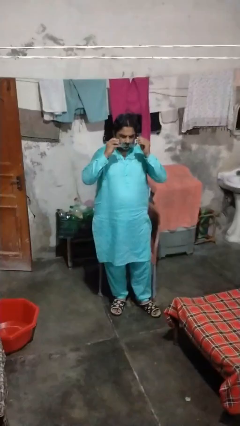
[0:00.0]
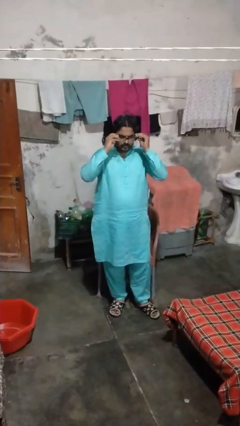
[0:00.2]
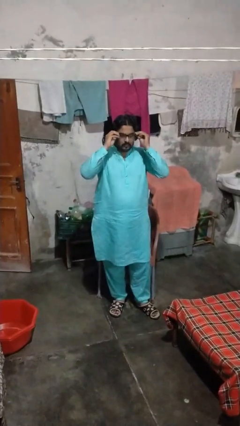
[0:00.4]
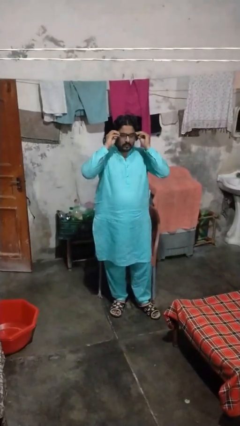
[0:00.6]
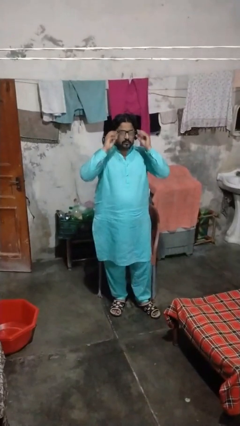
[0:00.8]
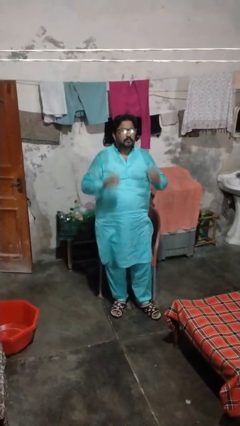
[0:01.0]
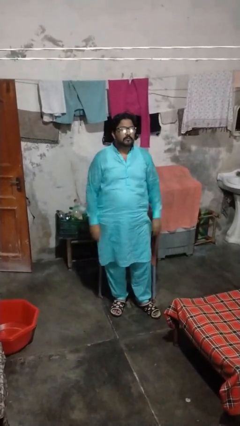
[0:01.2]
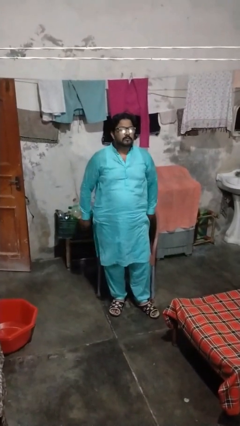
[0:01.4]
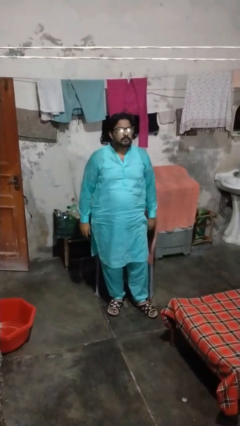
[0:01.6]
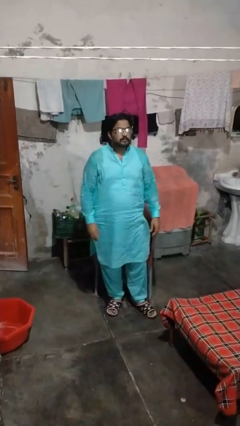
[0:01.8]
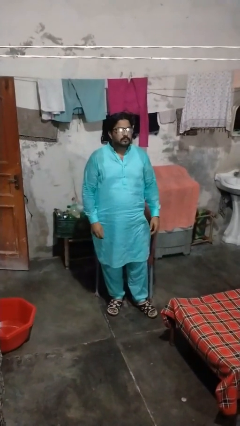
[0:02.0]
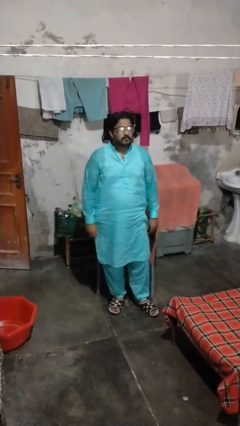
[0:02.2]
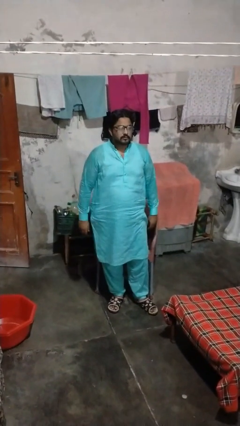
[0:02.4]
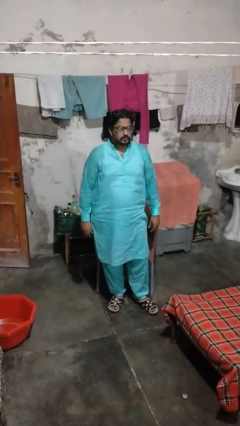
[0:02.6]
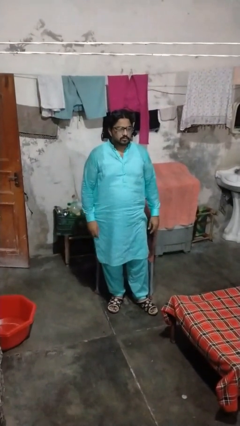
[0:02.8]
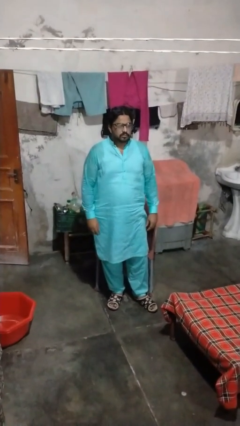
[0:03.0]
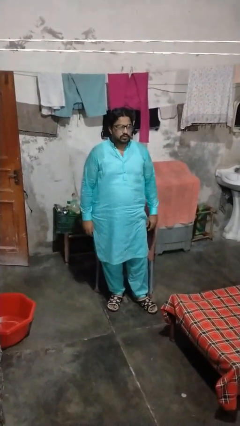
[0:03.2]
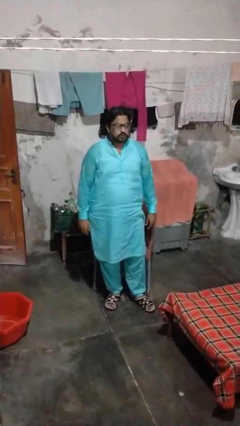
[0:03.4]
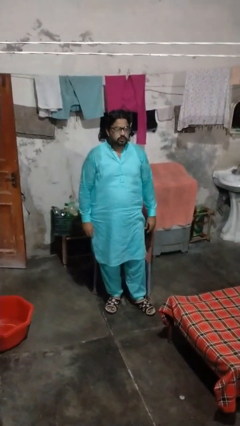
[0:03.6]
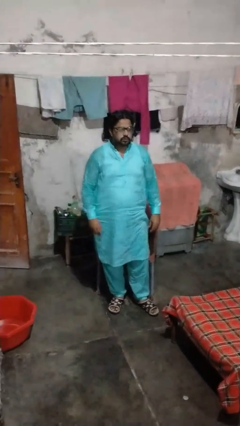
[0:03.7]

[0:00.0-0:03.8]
person puts on glasses

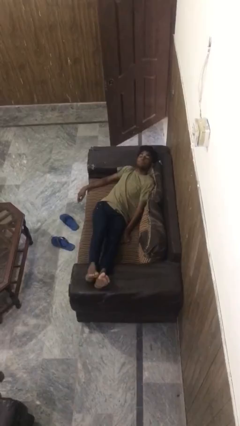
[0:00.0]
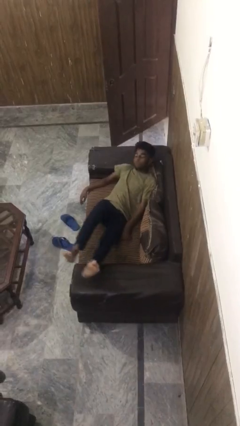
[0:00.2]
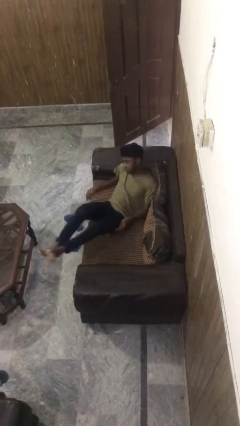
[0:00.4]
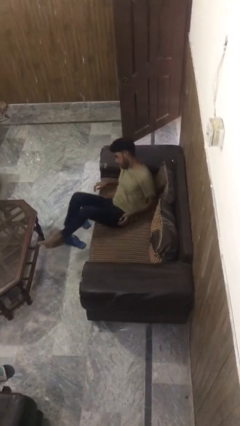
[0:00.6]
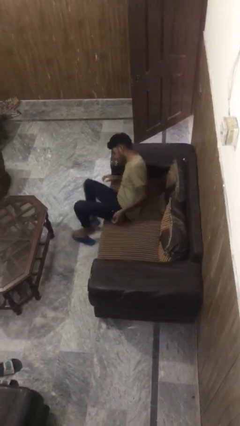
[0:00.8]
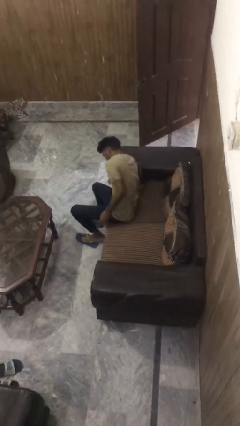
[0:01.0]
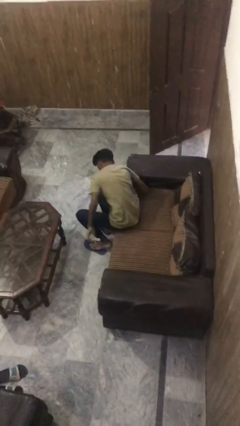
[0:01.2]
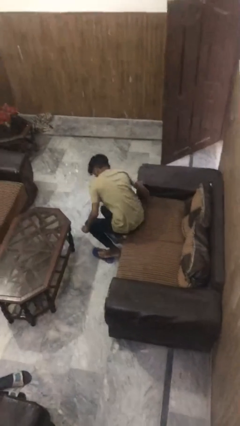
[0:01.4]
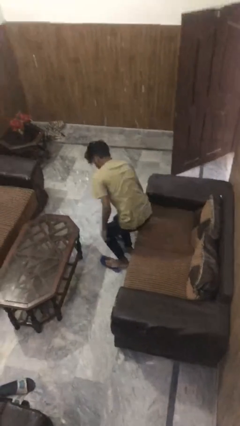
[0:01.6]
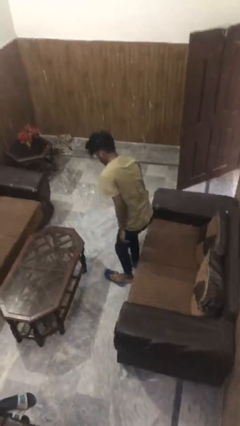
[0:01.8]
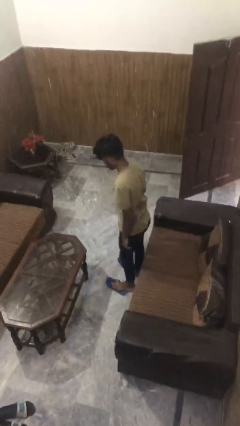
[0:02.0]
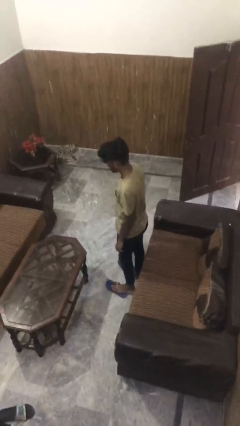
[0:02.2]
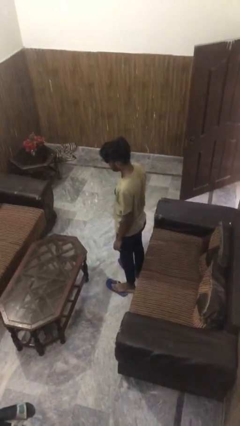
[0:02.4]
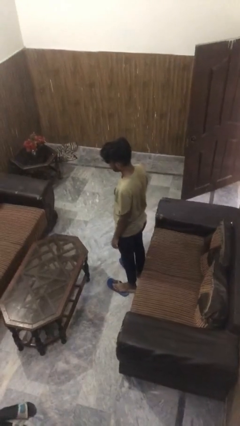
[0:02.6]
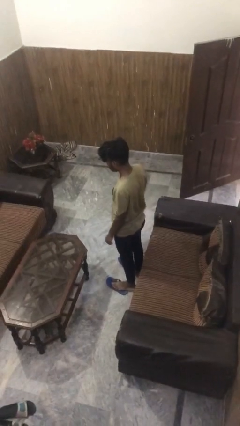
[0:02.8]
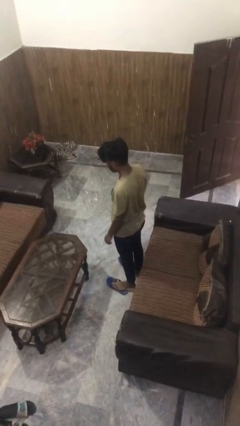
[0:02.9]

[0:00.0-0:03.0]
person stands up

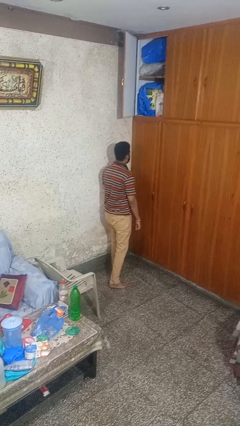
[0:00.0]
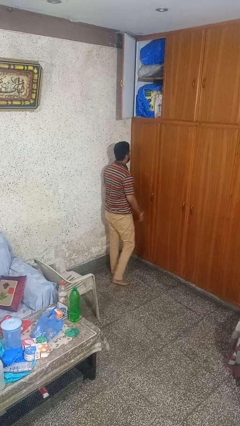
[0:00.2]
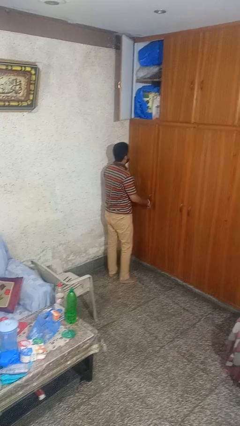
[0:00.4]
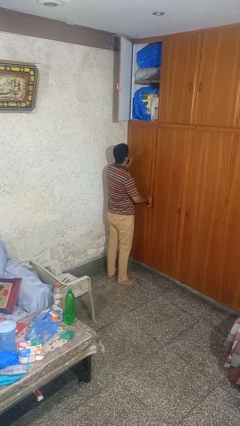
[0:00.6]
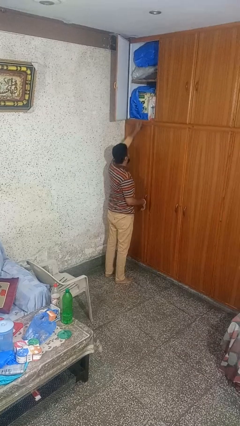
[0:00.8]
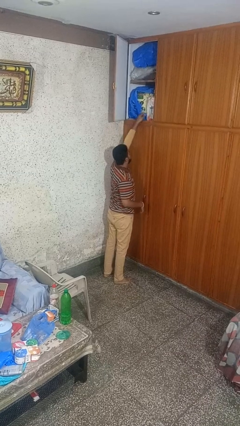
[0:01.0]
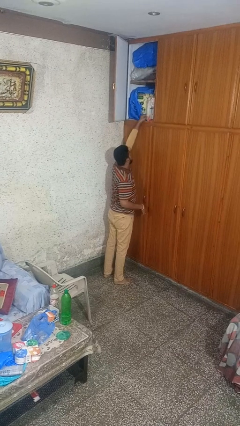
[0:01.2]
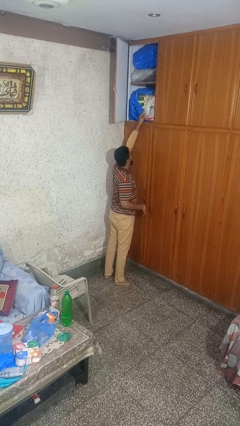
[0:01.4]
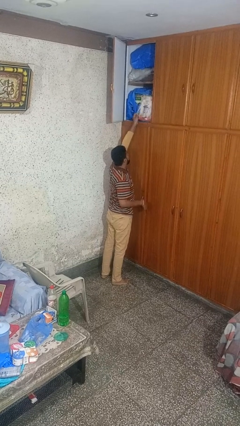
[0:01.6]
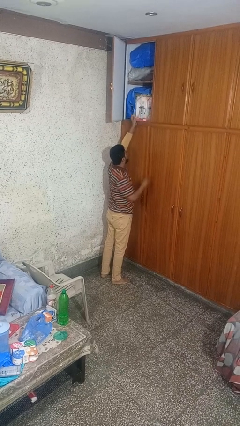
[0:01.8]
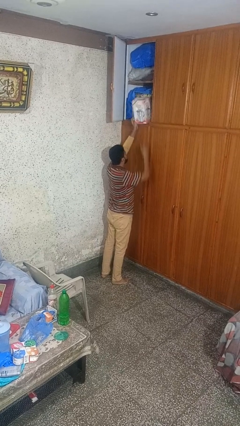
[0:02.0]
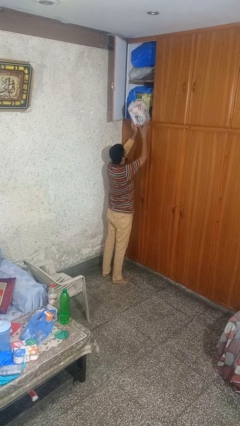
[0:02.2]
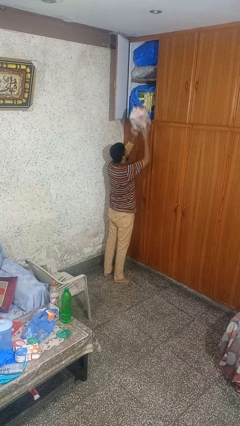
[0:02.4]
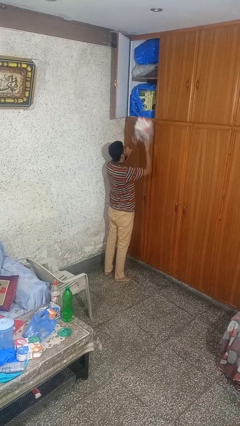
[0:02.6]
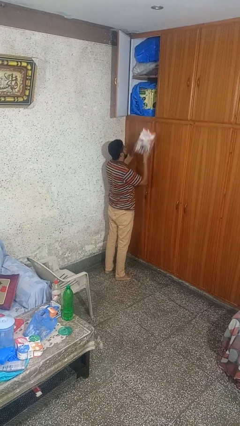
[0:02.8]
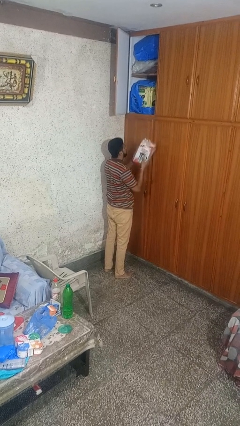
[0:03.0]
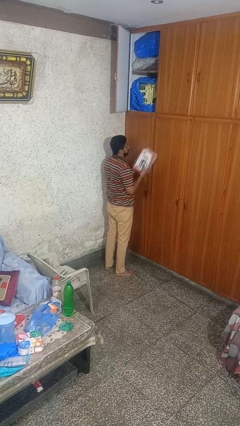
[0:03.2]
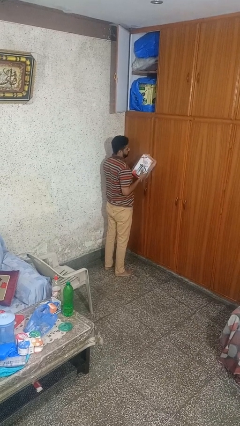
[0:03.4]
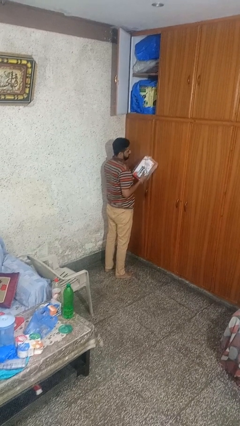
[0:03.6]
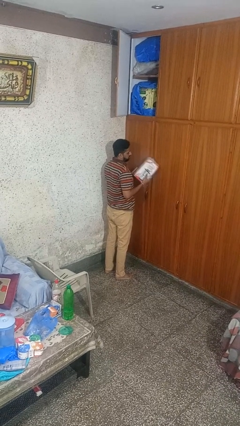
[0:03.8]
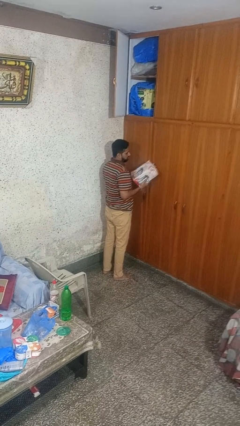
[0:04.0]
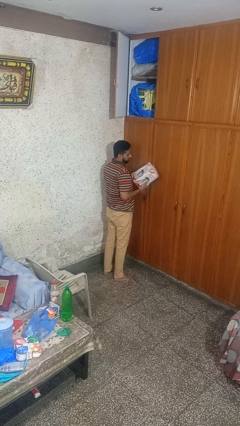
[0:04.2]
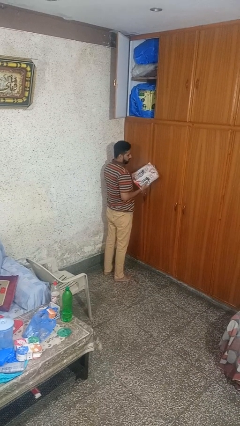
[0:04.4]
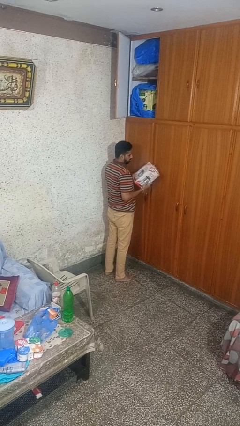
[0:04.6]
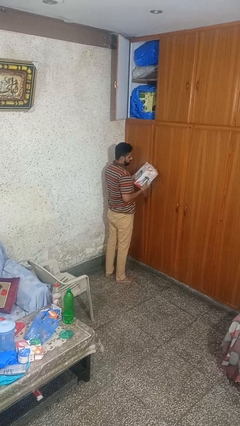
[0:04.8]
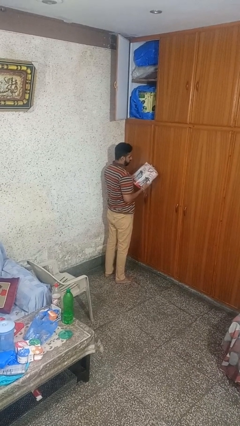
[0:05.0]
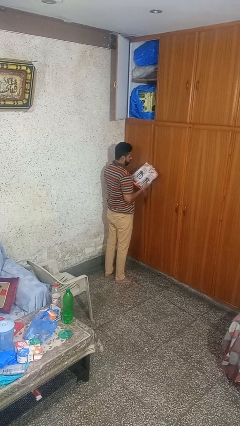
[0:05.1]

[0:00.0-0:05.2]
person picks up object from countertop

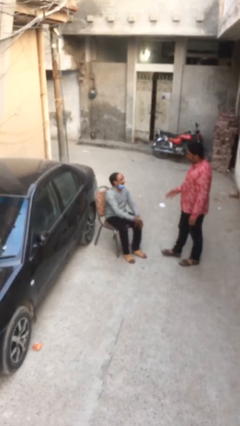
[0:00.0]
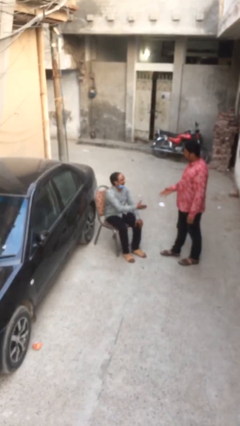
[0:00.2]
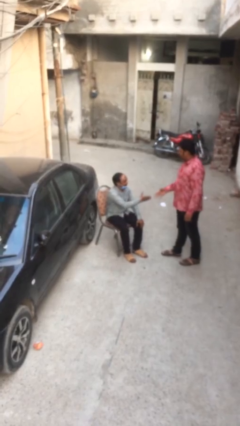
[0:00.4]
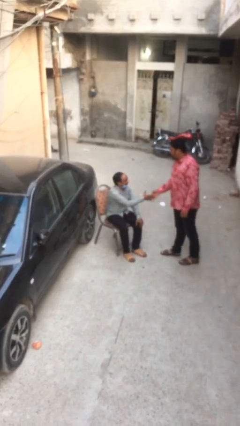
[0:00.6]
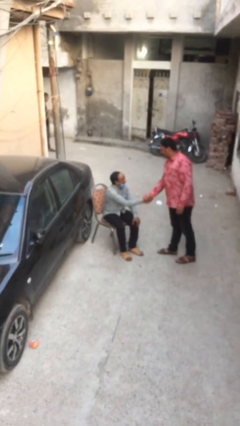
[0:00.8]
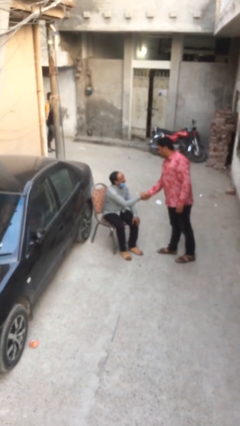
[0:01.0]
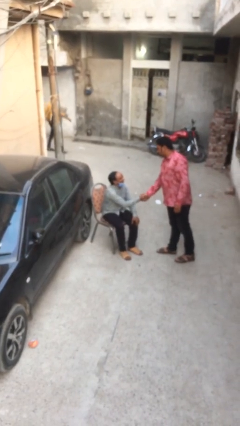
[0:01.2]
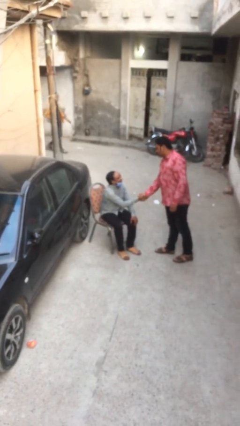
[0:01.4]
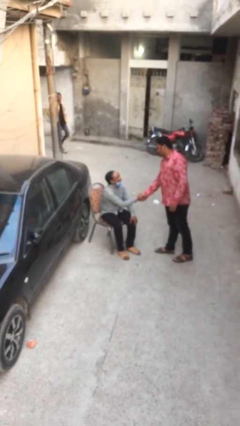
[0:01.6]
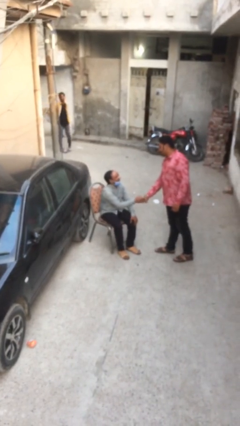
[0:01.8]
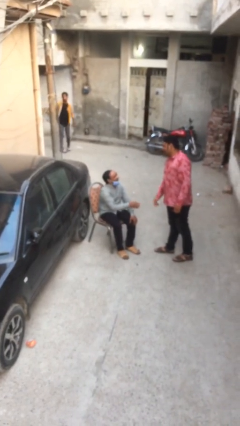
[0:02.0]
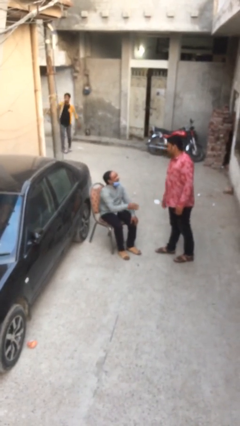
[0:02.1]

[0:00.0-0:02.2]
person shakes hand

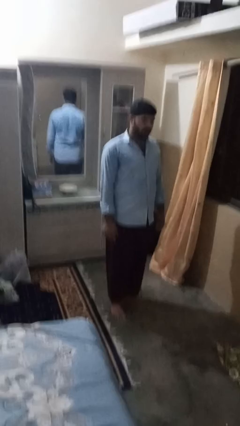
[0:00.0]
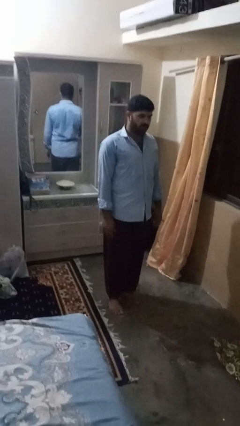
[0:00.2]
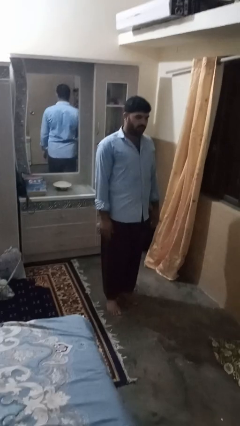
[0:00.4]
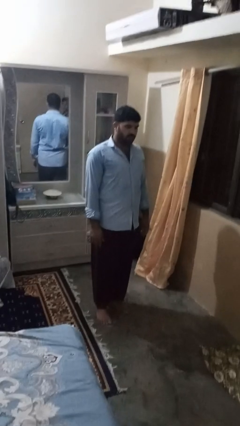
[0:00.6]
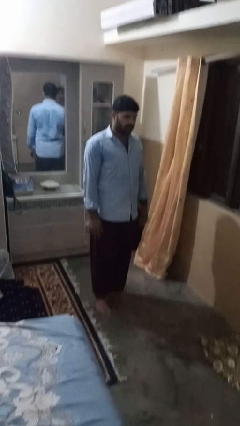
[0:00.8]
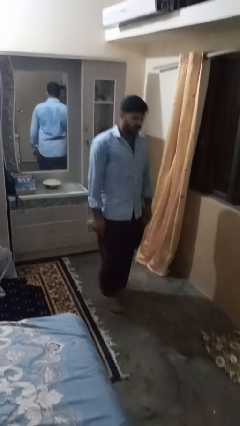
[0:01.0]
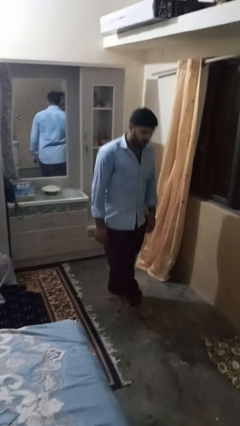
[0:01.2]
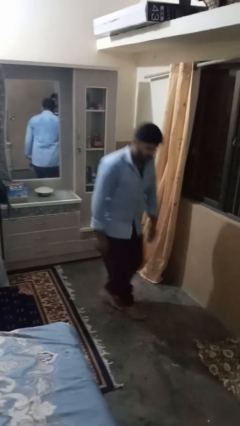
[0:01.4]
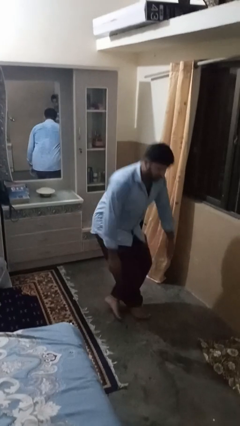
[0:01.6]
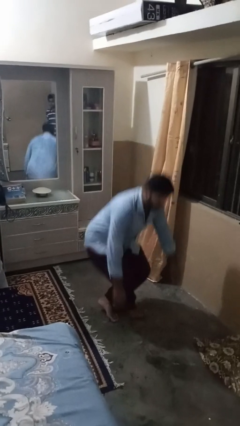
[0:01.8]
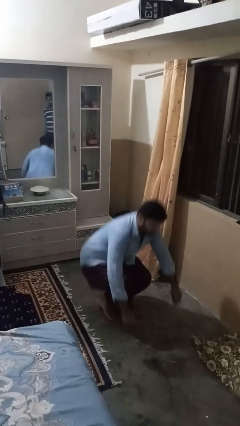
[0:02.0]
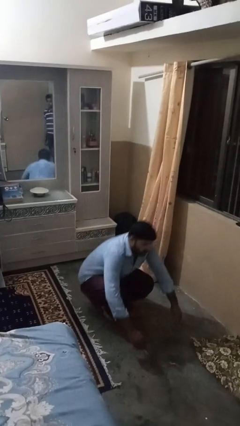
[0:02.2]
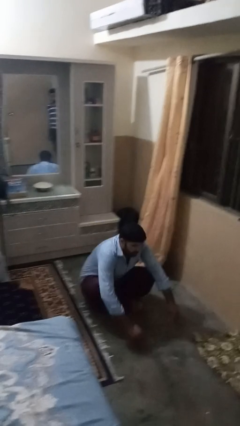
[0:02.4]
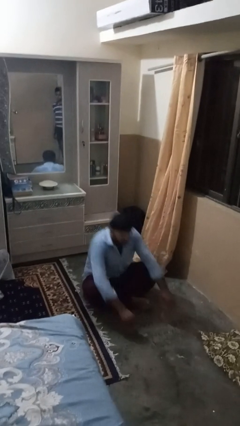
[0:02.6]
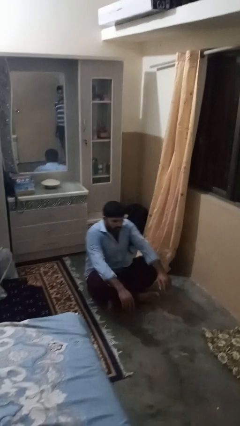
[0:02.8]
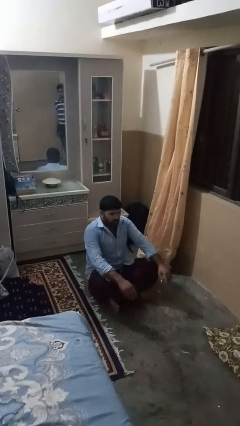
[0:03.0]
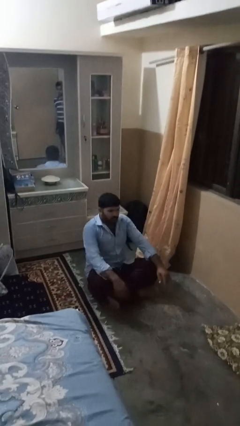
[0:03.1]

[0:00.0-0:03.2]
person crosses legs

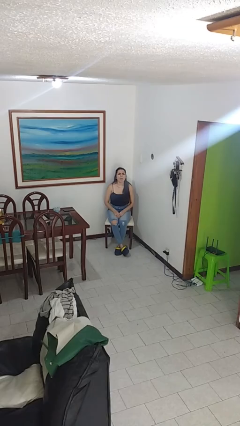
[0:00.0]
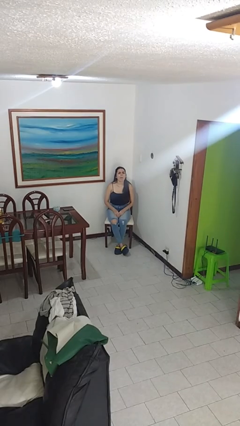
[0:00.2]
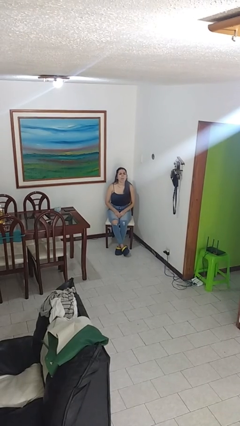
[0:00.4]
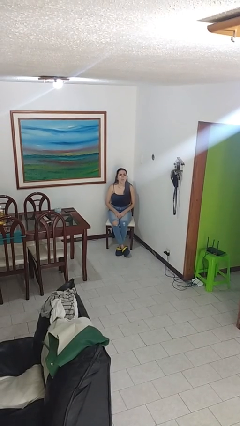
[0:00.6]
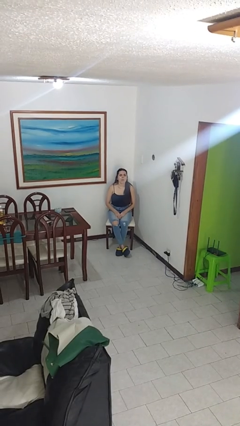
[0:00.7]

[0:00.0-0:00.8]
person sticks out tongue
